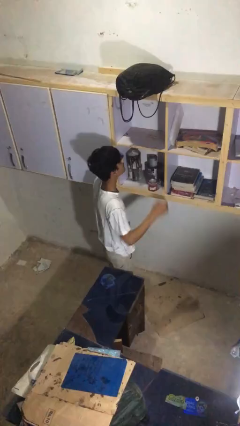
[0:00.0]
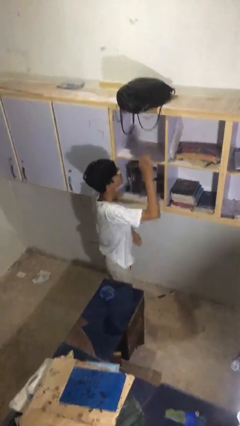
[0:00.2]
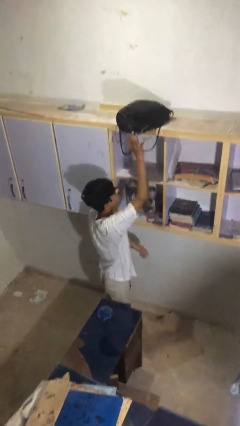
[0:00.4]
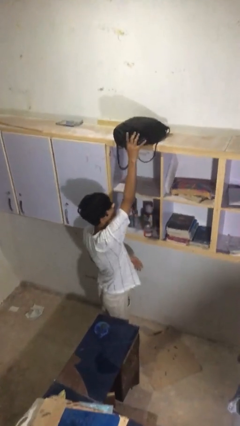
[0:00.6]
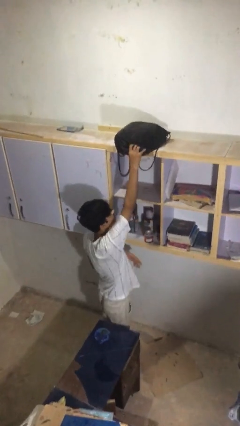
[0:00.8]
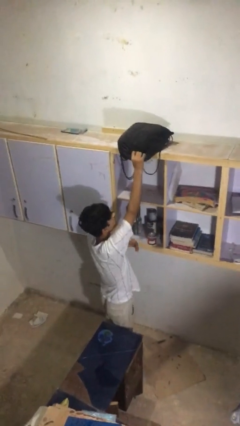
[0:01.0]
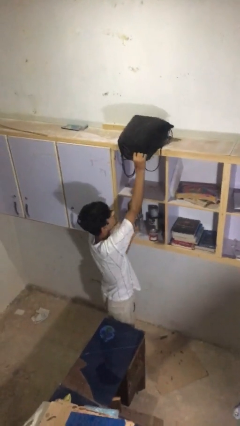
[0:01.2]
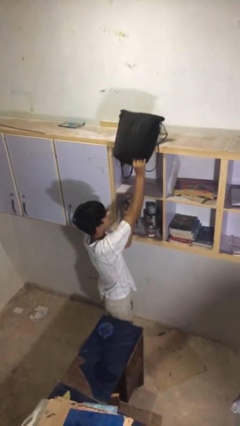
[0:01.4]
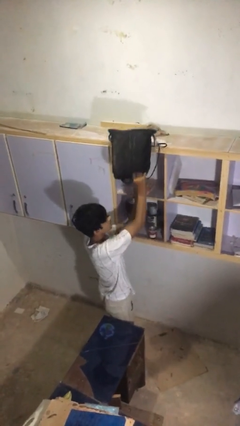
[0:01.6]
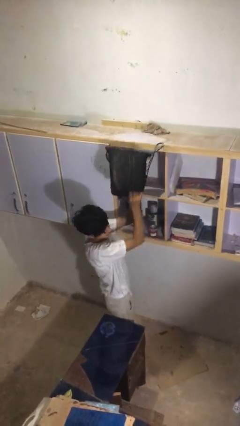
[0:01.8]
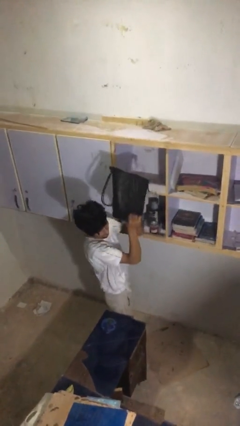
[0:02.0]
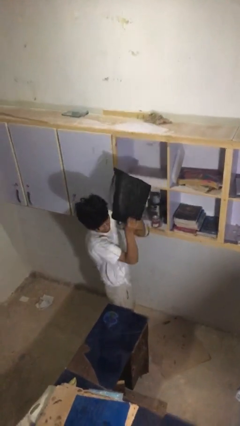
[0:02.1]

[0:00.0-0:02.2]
person picks up object from shelf

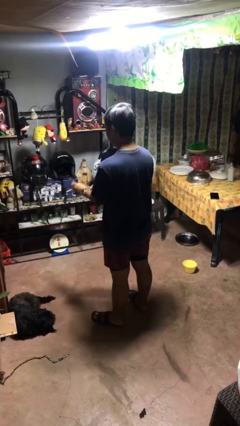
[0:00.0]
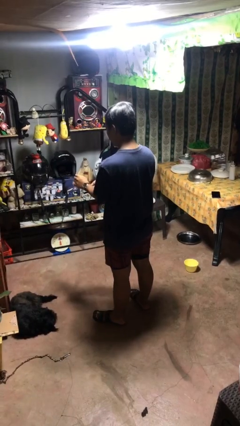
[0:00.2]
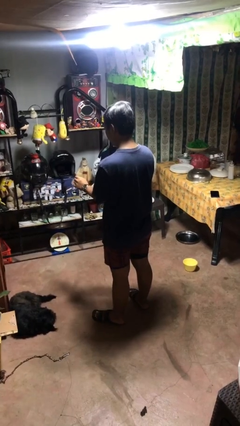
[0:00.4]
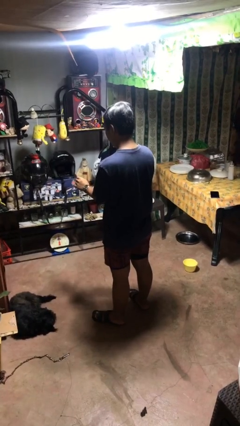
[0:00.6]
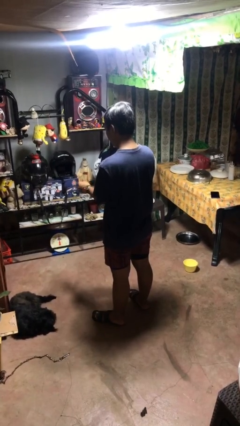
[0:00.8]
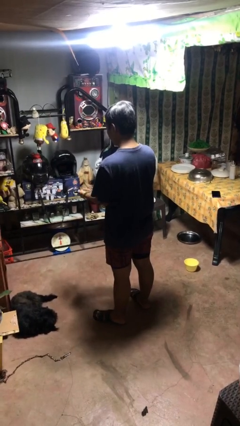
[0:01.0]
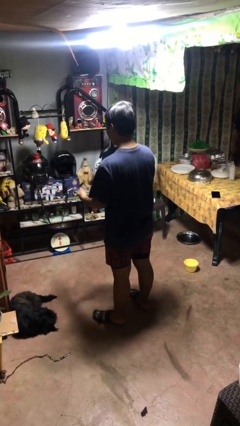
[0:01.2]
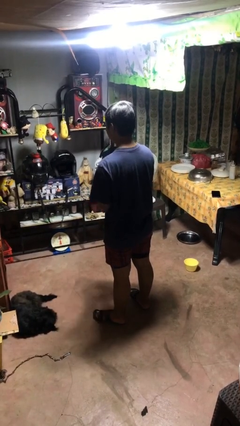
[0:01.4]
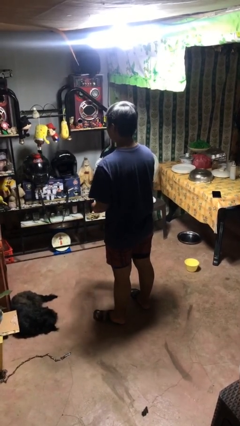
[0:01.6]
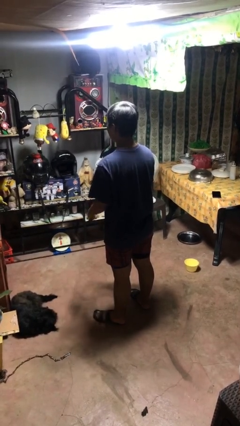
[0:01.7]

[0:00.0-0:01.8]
person takes off wristwatch

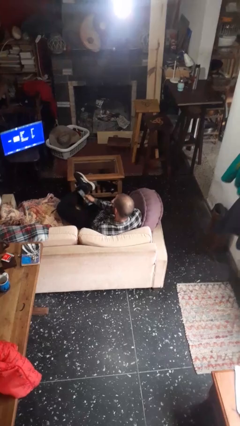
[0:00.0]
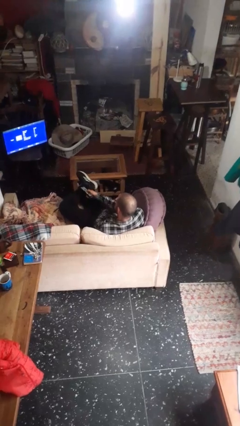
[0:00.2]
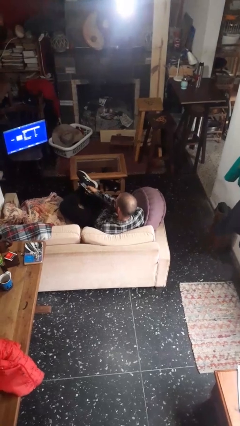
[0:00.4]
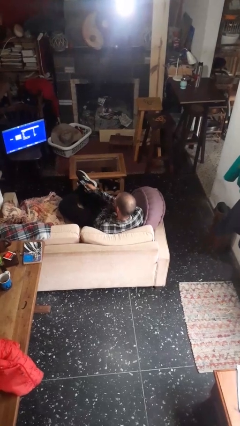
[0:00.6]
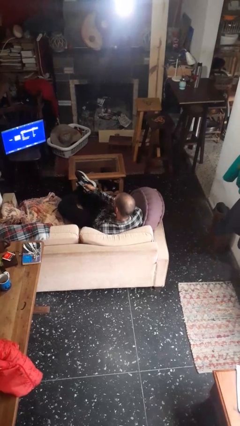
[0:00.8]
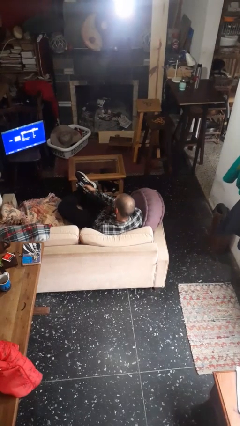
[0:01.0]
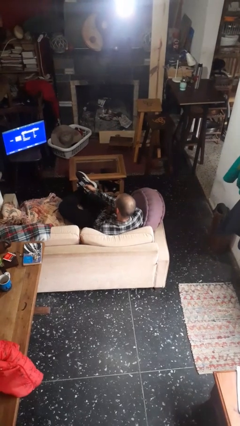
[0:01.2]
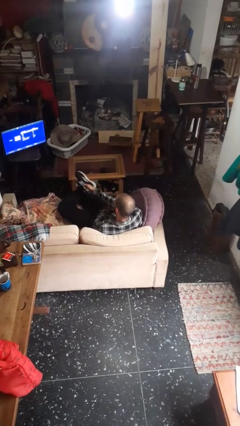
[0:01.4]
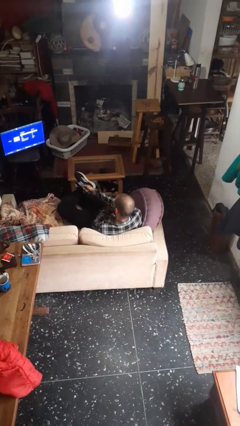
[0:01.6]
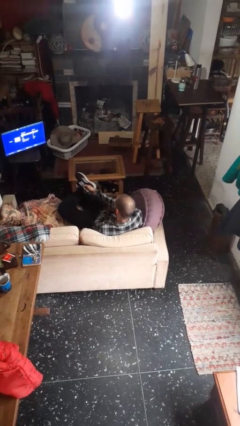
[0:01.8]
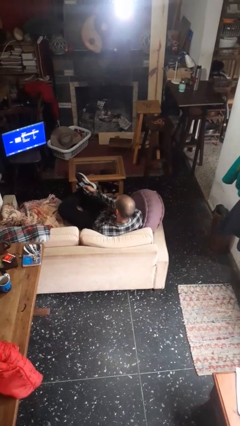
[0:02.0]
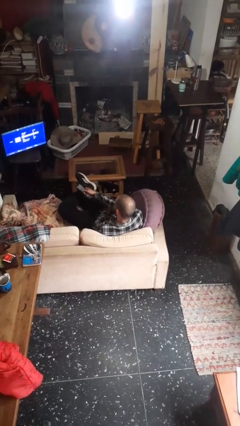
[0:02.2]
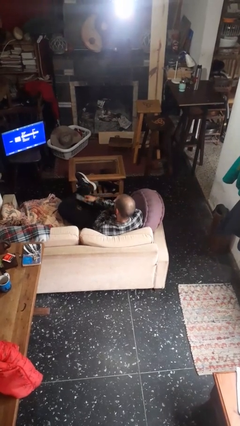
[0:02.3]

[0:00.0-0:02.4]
person uses television remote

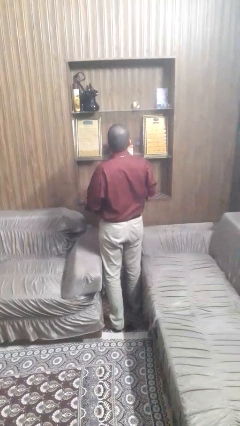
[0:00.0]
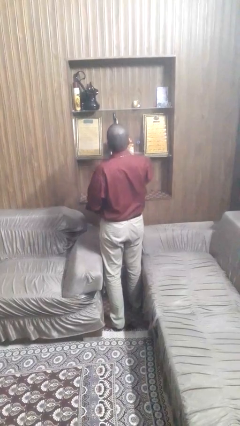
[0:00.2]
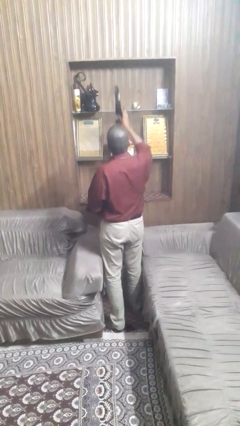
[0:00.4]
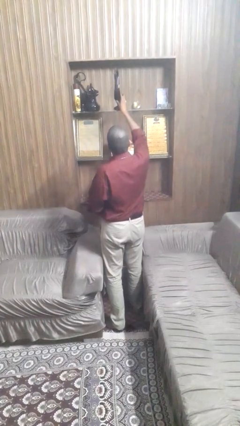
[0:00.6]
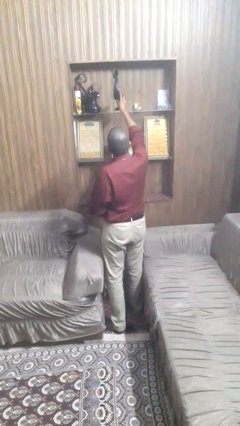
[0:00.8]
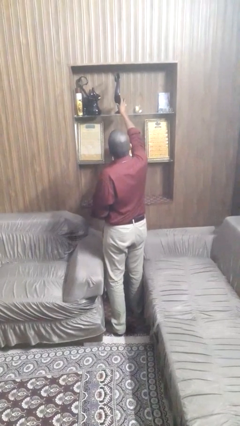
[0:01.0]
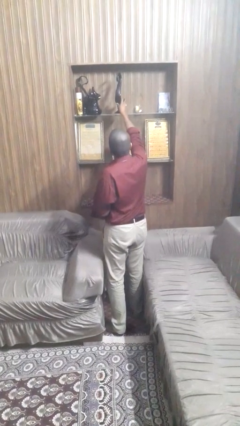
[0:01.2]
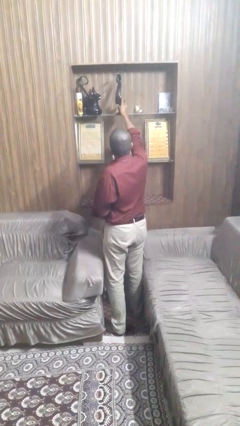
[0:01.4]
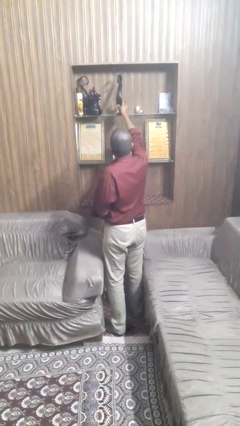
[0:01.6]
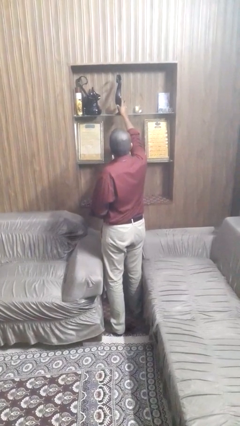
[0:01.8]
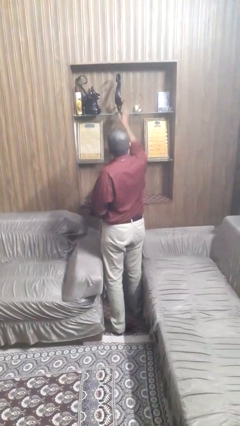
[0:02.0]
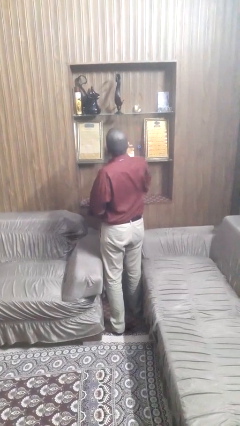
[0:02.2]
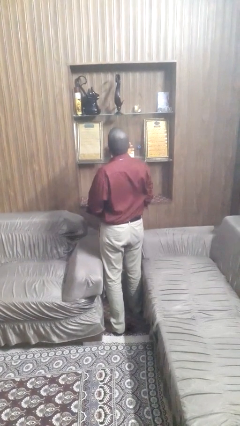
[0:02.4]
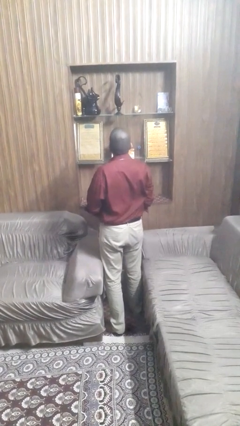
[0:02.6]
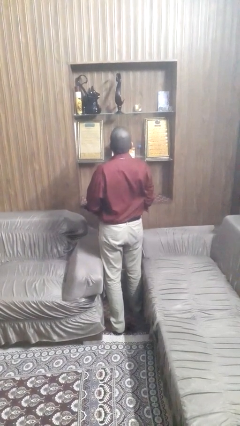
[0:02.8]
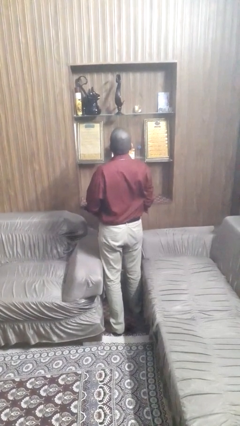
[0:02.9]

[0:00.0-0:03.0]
person puts down object on shelf

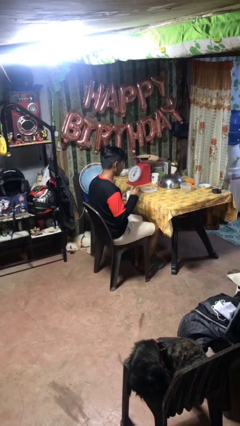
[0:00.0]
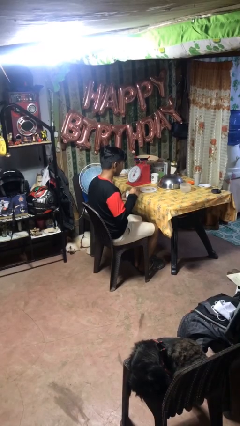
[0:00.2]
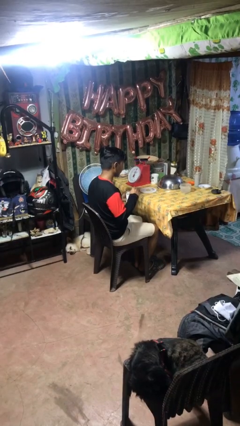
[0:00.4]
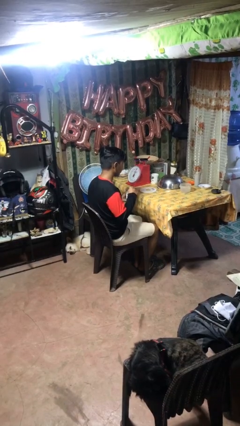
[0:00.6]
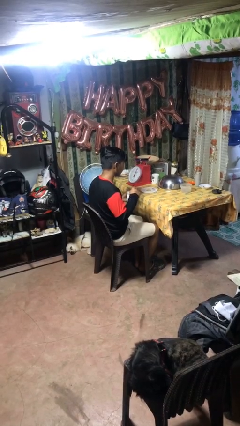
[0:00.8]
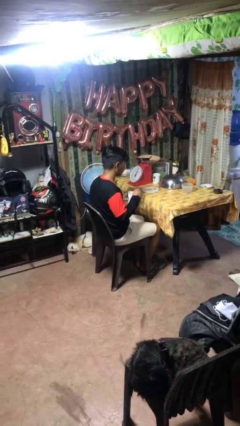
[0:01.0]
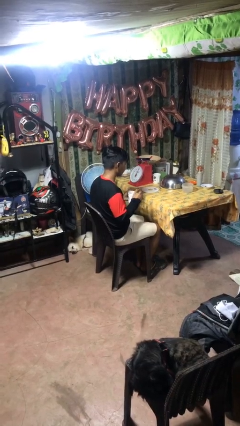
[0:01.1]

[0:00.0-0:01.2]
person stirs mug

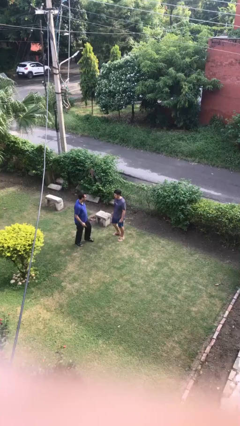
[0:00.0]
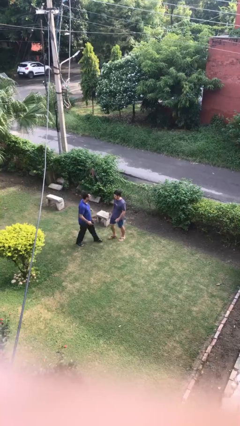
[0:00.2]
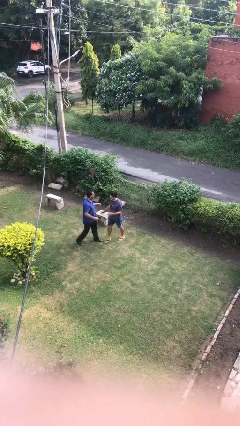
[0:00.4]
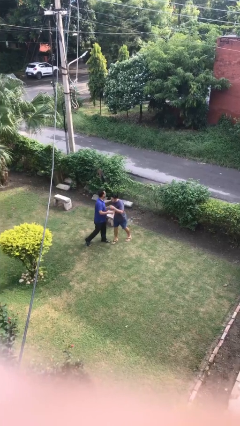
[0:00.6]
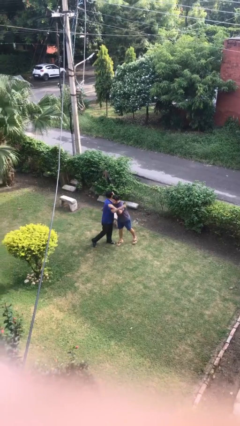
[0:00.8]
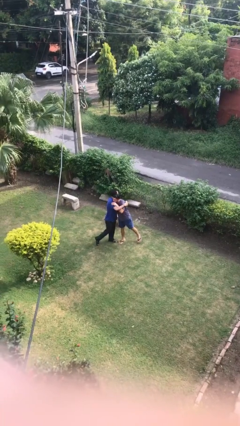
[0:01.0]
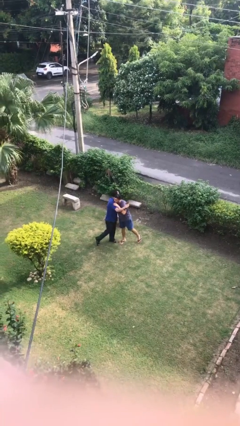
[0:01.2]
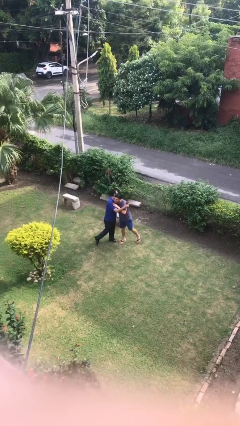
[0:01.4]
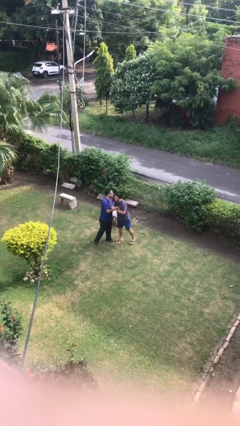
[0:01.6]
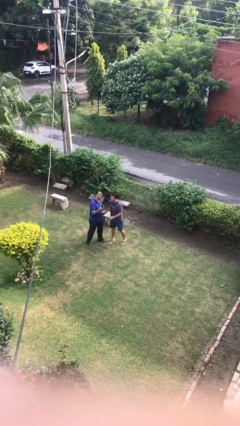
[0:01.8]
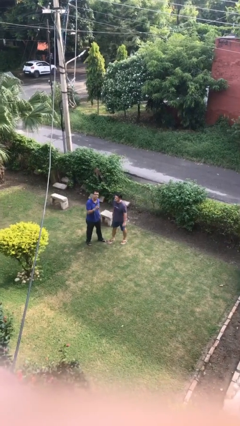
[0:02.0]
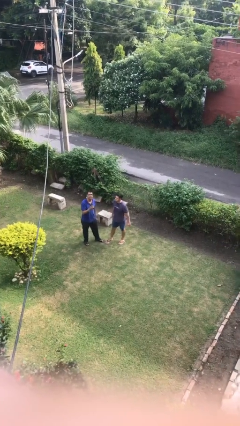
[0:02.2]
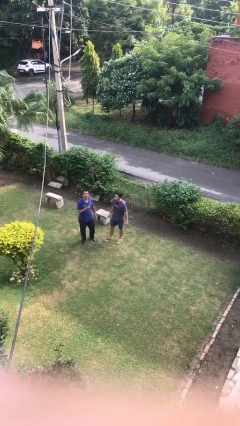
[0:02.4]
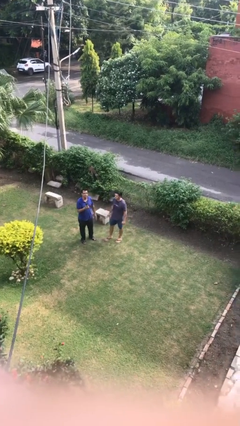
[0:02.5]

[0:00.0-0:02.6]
person embraces person

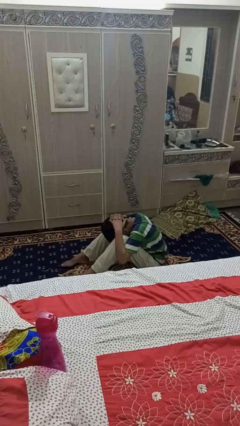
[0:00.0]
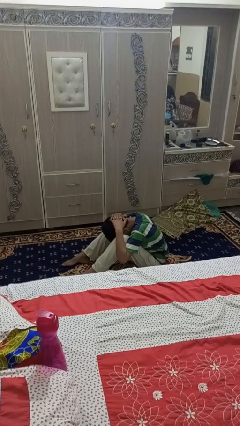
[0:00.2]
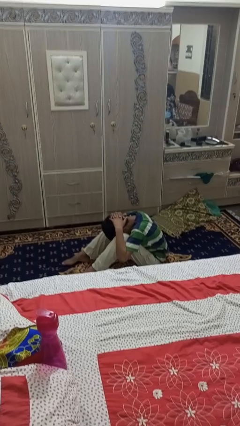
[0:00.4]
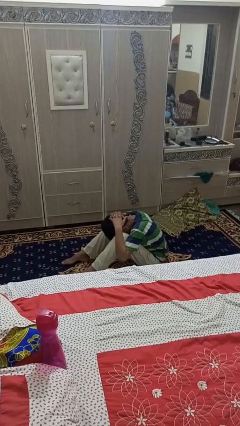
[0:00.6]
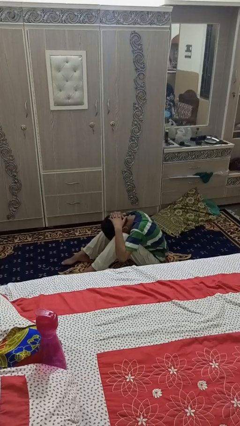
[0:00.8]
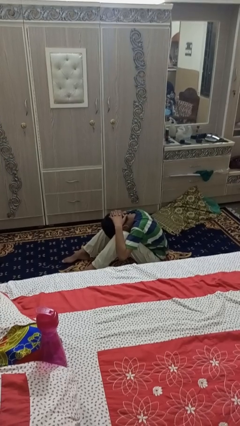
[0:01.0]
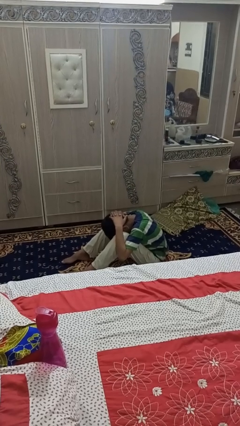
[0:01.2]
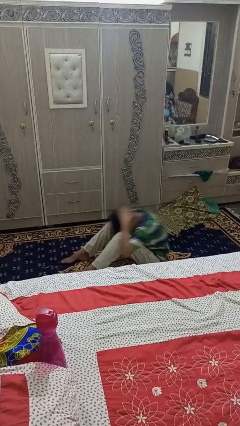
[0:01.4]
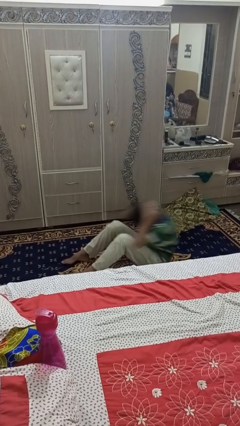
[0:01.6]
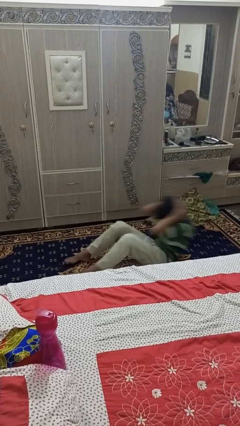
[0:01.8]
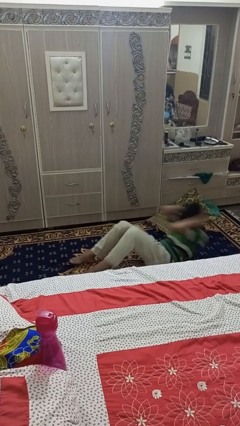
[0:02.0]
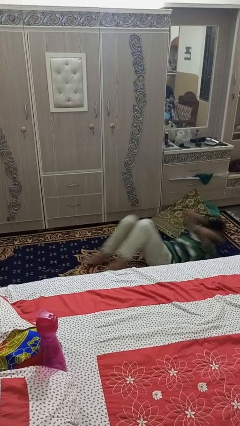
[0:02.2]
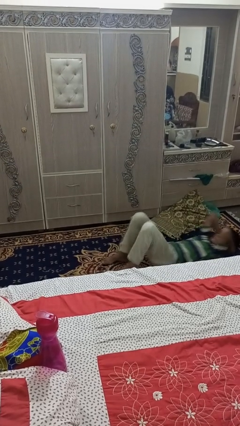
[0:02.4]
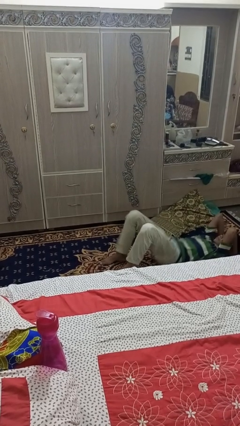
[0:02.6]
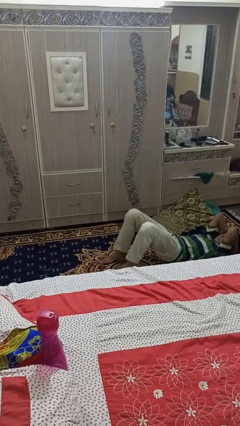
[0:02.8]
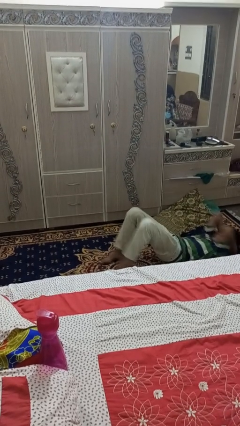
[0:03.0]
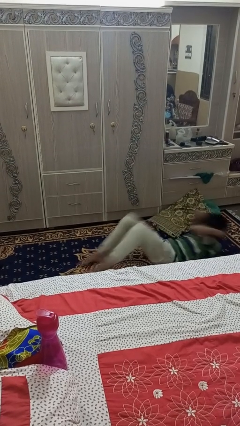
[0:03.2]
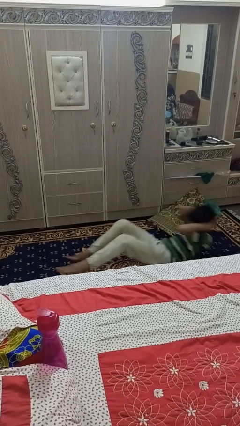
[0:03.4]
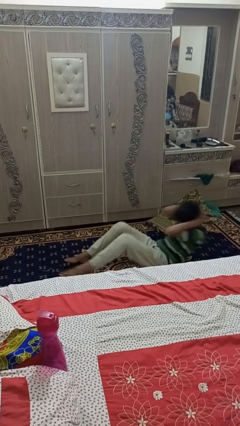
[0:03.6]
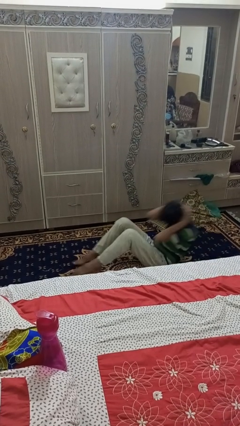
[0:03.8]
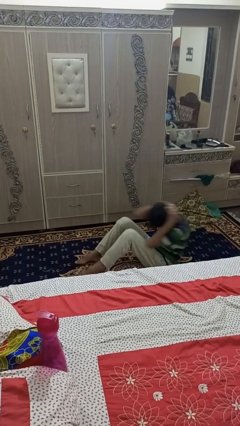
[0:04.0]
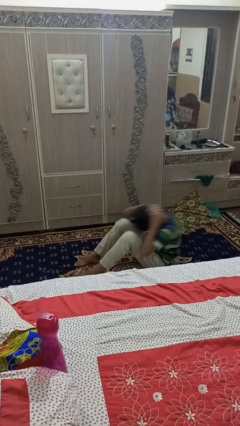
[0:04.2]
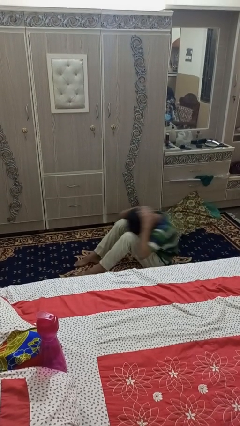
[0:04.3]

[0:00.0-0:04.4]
person exercises with situp
